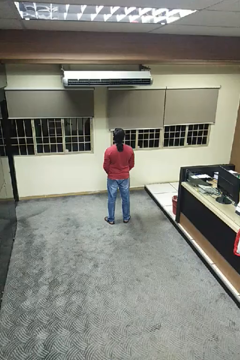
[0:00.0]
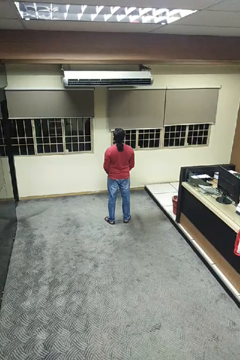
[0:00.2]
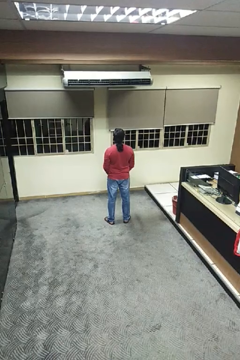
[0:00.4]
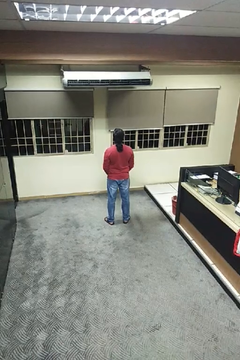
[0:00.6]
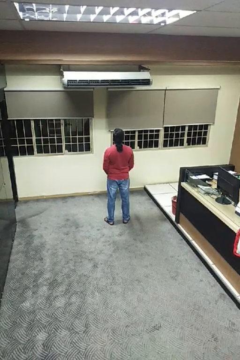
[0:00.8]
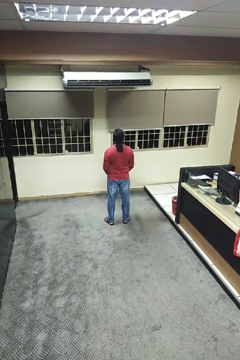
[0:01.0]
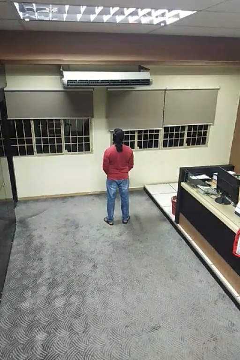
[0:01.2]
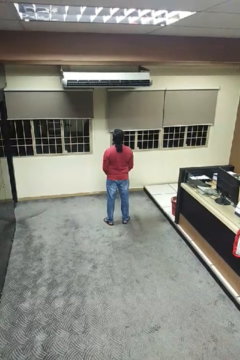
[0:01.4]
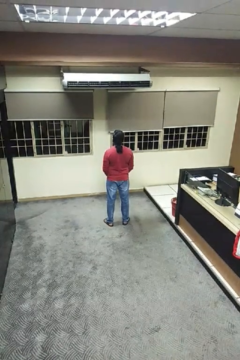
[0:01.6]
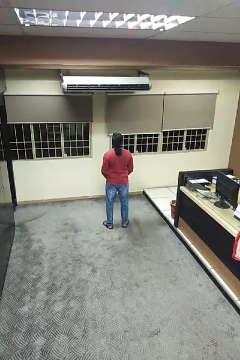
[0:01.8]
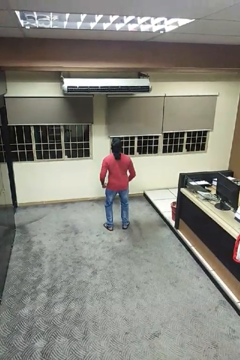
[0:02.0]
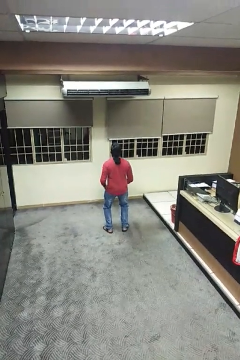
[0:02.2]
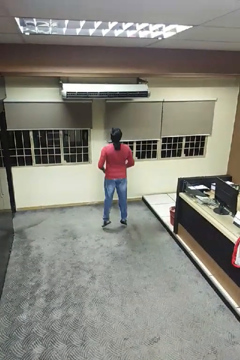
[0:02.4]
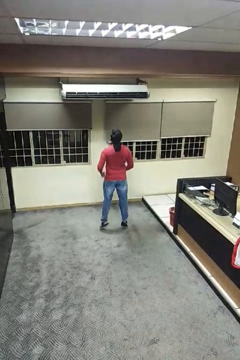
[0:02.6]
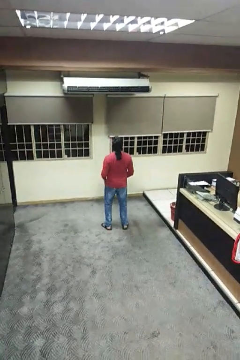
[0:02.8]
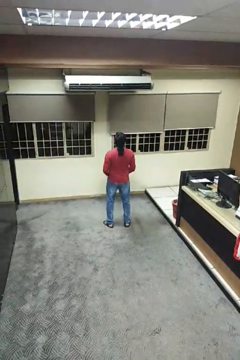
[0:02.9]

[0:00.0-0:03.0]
person jumps

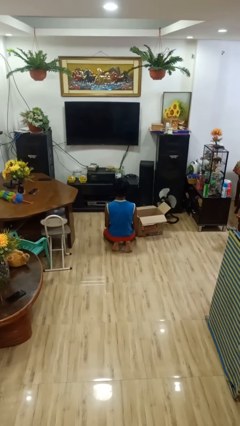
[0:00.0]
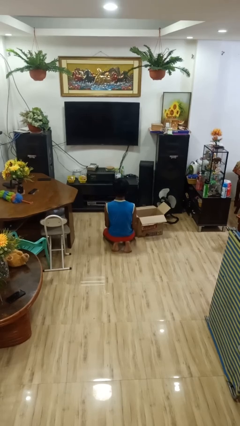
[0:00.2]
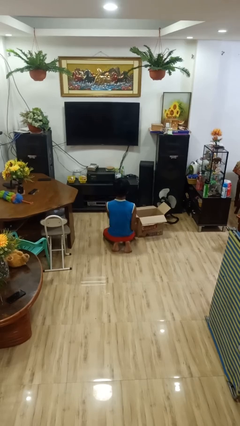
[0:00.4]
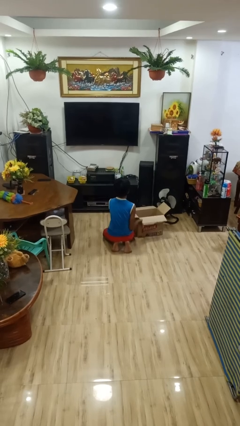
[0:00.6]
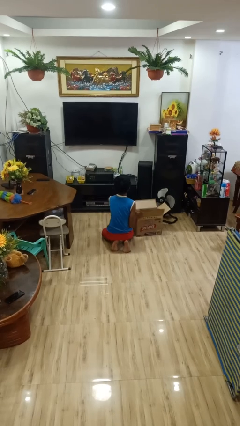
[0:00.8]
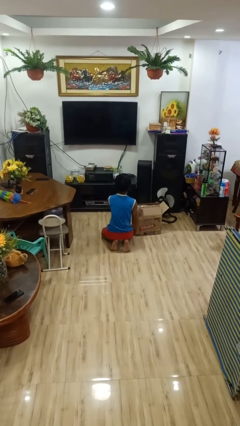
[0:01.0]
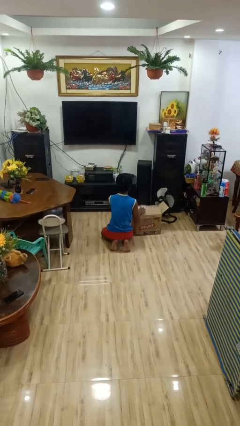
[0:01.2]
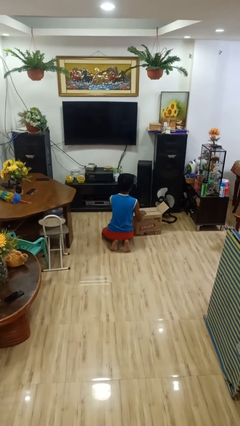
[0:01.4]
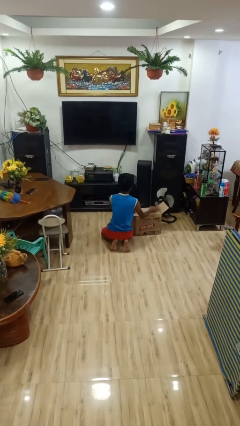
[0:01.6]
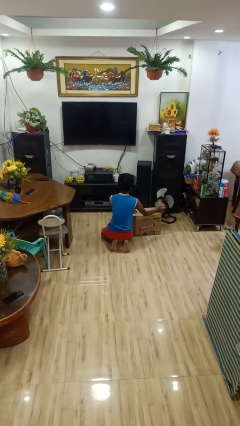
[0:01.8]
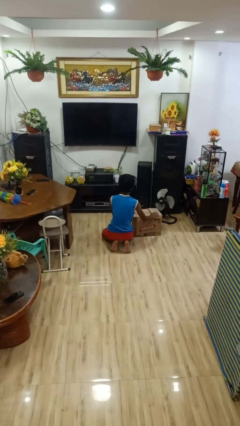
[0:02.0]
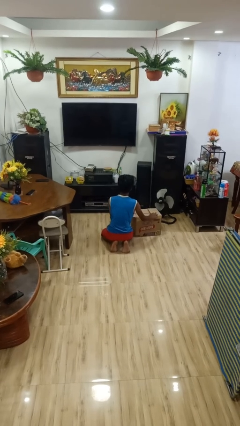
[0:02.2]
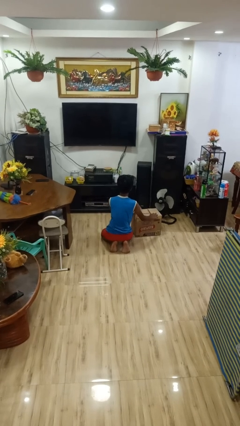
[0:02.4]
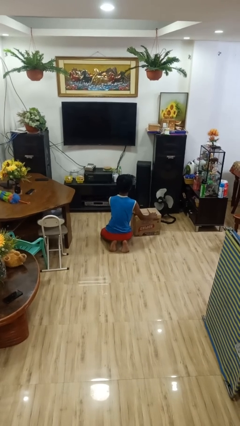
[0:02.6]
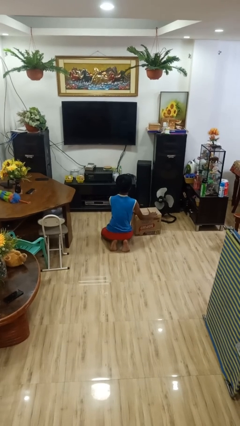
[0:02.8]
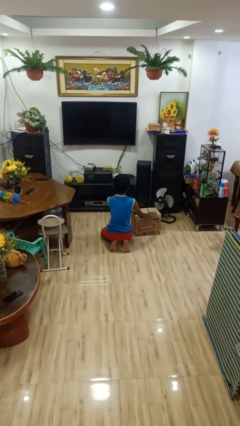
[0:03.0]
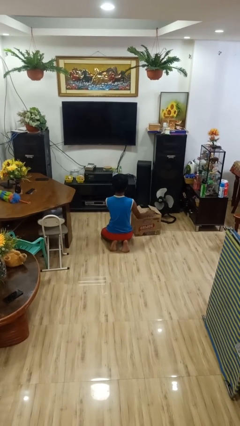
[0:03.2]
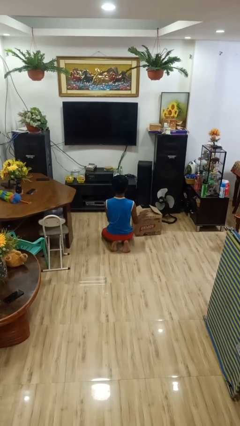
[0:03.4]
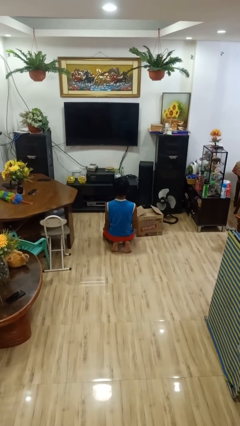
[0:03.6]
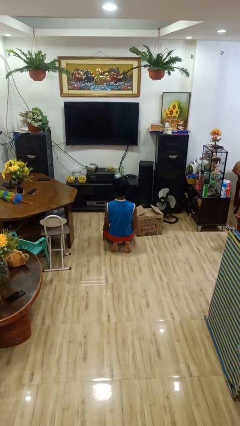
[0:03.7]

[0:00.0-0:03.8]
person closes box

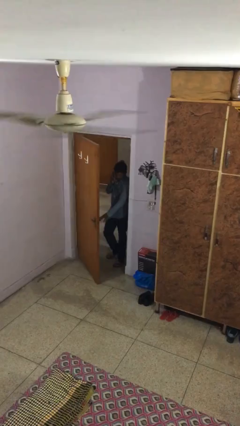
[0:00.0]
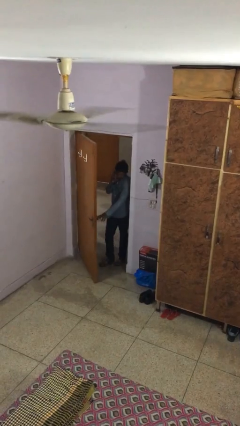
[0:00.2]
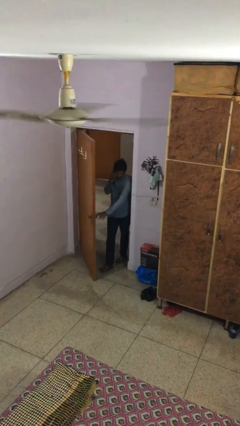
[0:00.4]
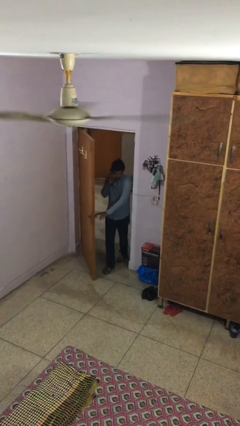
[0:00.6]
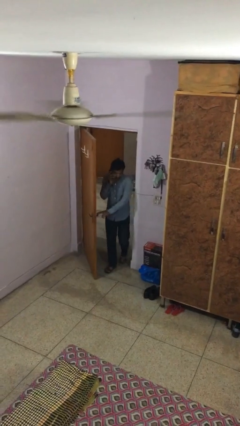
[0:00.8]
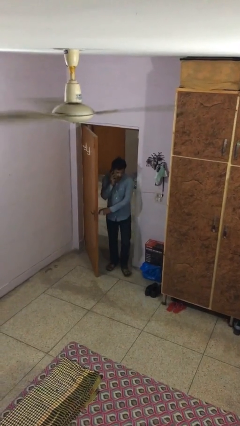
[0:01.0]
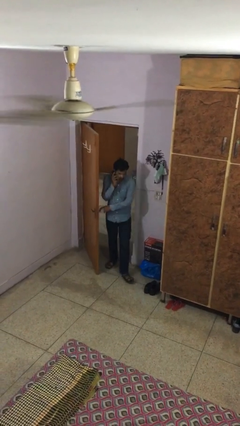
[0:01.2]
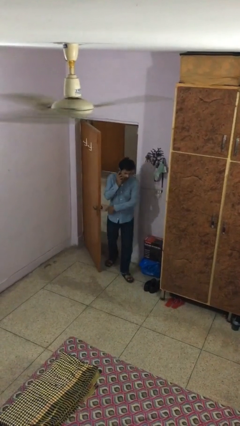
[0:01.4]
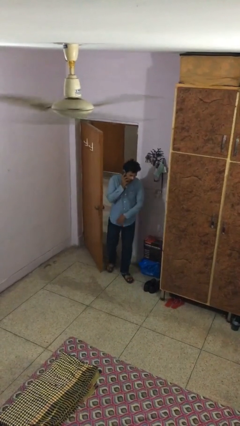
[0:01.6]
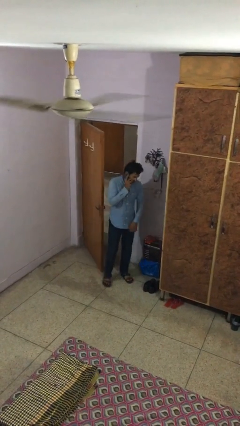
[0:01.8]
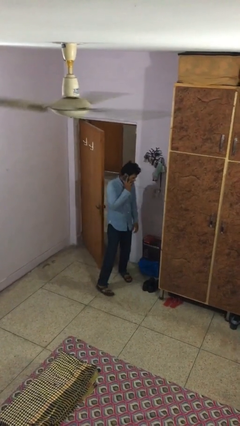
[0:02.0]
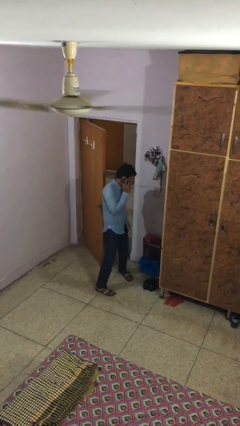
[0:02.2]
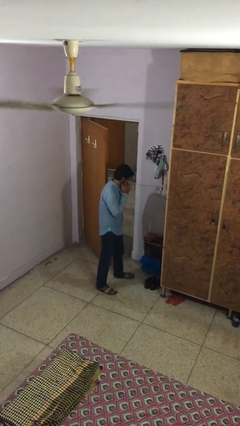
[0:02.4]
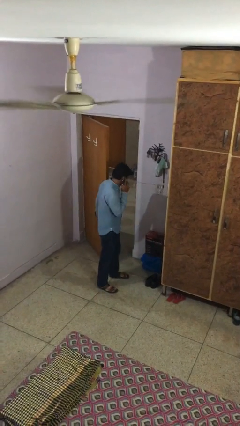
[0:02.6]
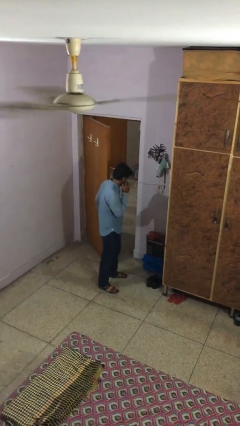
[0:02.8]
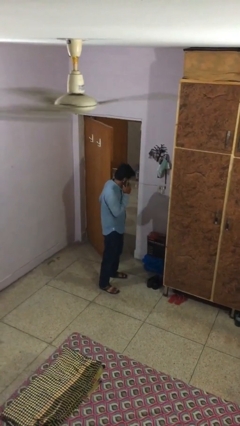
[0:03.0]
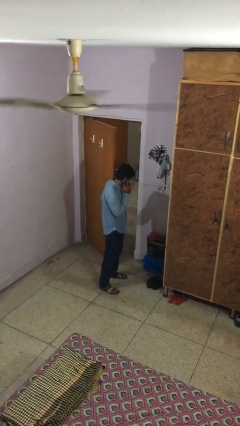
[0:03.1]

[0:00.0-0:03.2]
person enters scene through structure

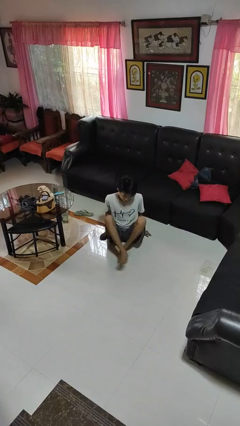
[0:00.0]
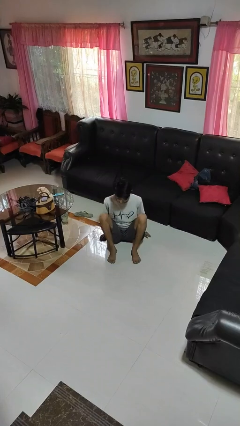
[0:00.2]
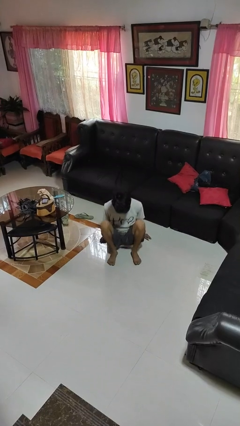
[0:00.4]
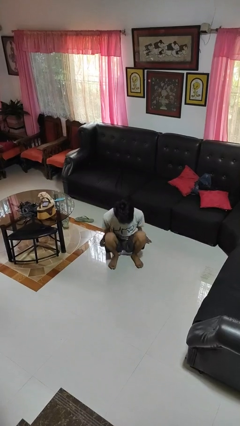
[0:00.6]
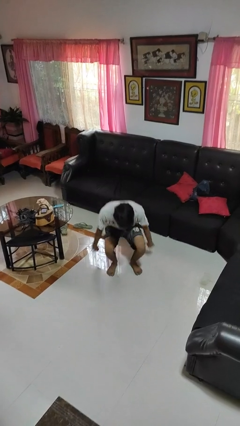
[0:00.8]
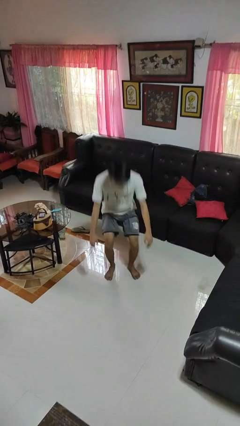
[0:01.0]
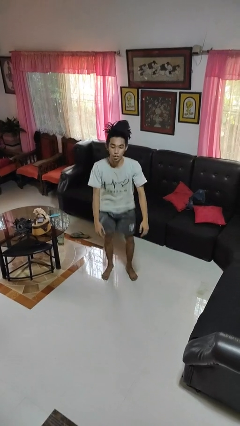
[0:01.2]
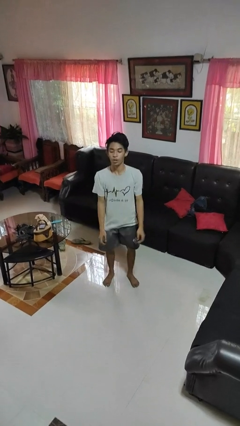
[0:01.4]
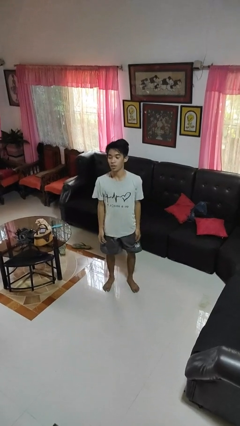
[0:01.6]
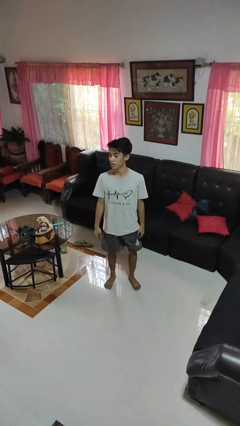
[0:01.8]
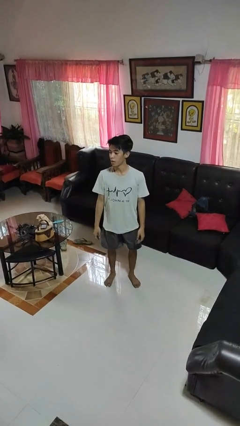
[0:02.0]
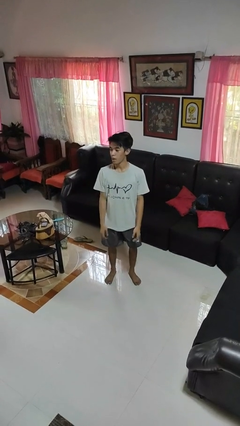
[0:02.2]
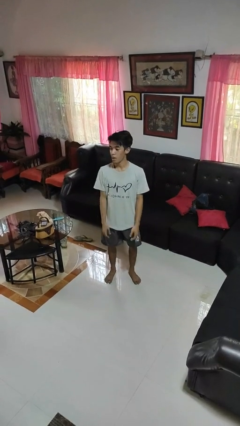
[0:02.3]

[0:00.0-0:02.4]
person stands up from floor

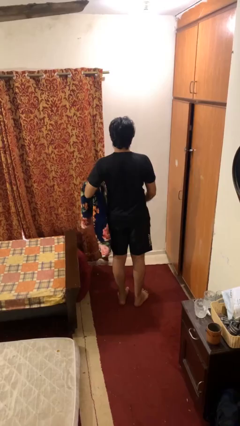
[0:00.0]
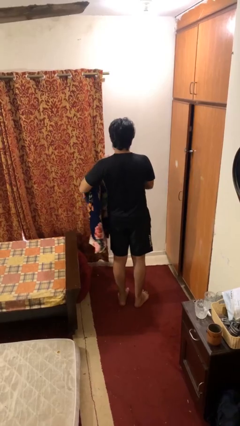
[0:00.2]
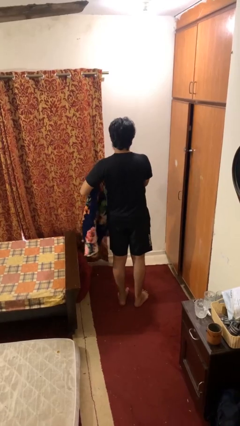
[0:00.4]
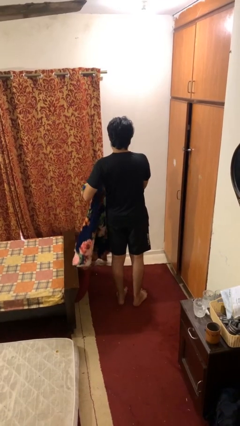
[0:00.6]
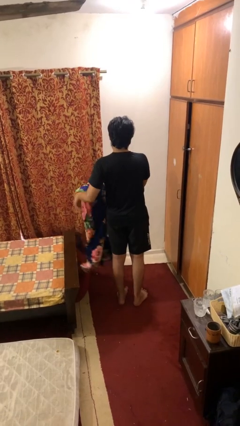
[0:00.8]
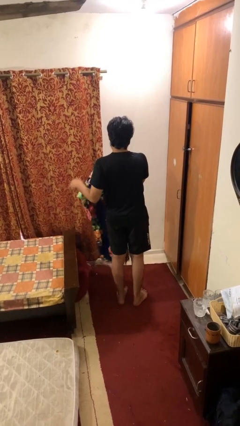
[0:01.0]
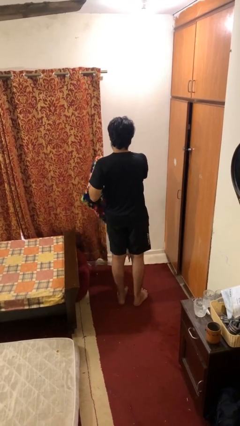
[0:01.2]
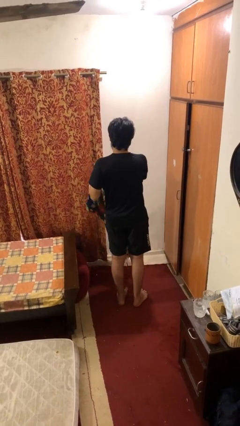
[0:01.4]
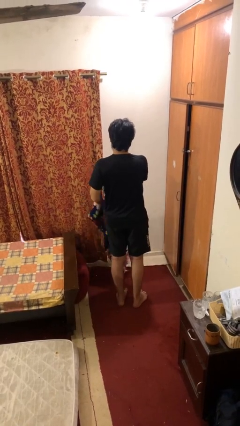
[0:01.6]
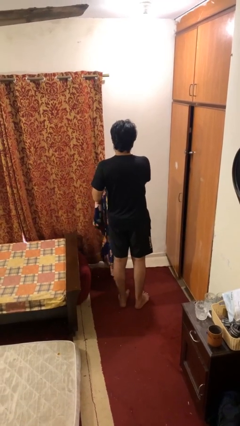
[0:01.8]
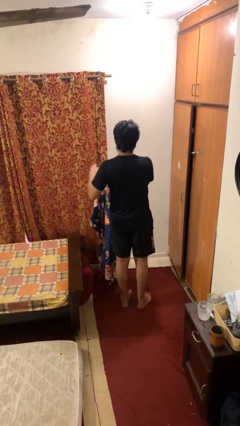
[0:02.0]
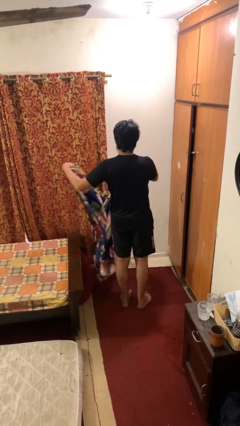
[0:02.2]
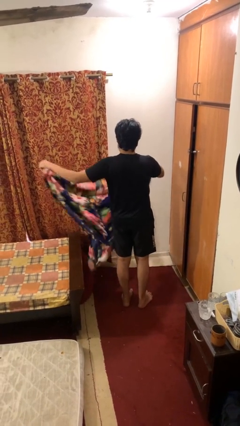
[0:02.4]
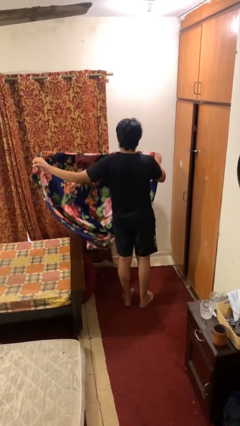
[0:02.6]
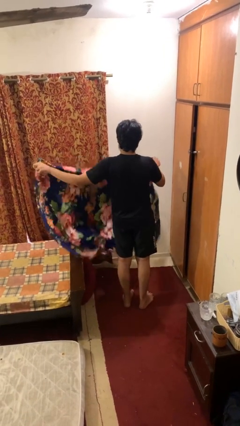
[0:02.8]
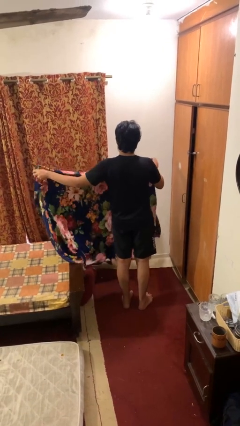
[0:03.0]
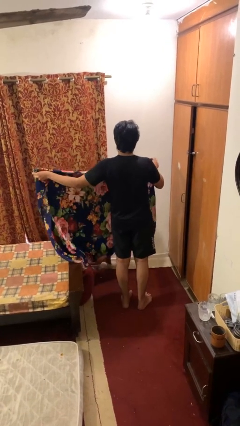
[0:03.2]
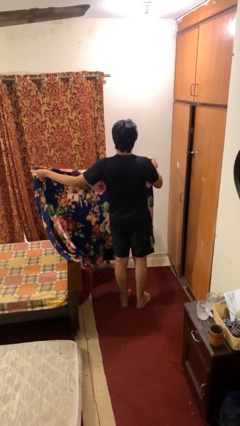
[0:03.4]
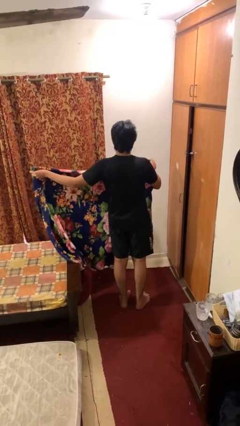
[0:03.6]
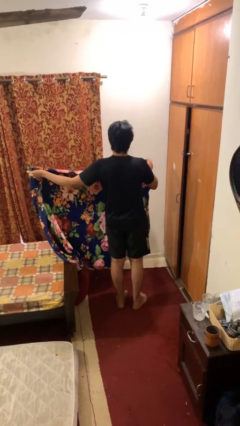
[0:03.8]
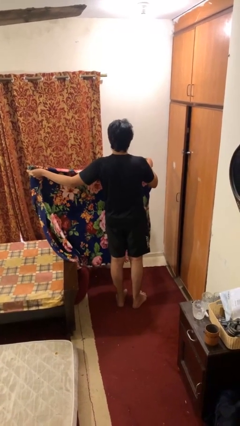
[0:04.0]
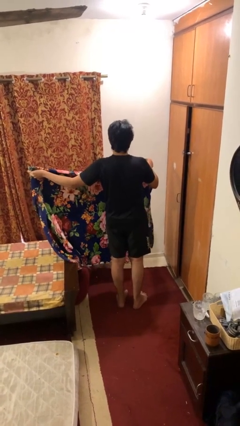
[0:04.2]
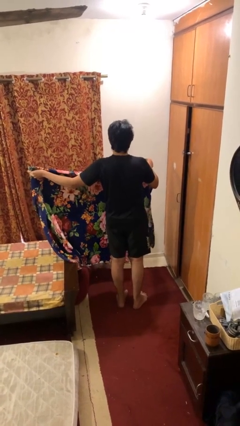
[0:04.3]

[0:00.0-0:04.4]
person unfolds blanket

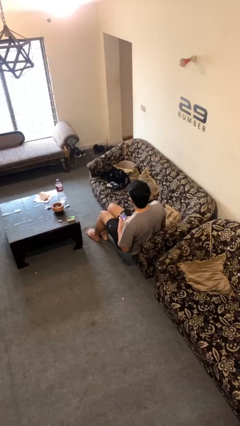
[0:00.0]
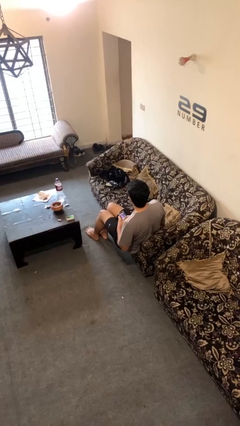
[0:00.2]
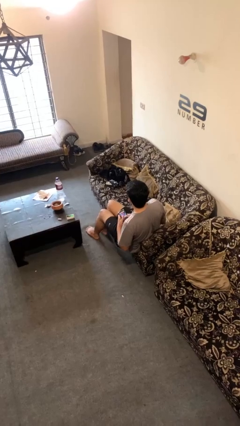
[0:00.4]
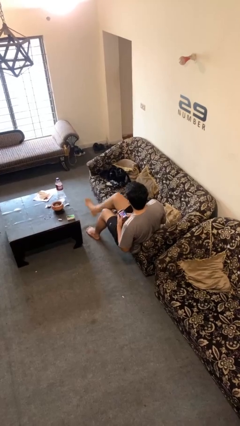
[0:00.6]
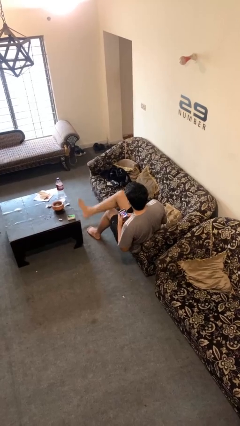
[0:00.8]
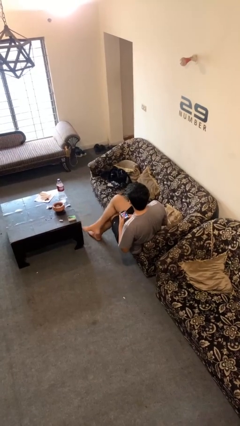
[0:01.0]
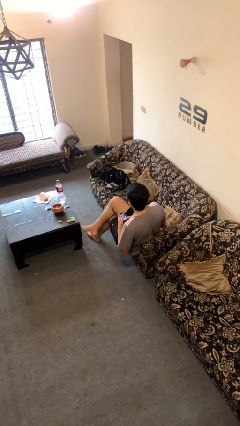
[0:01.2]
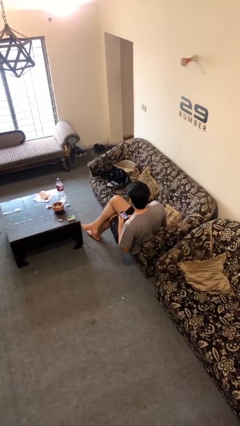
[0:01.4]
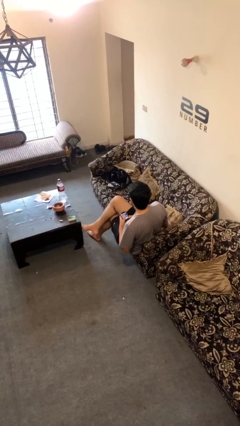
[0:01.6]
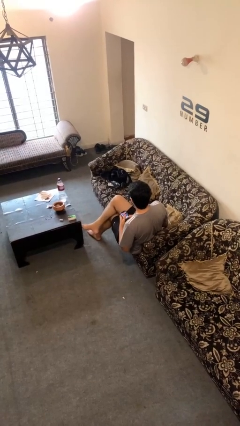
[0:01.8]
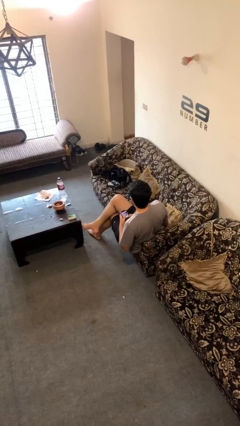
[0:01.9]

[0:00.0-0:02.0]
person crosses legs
